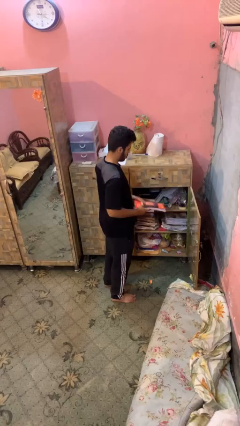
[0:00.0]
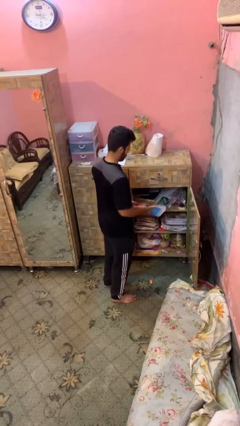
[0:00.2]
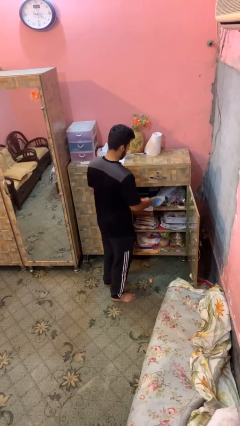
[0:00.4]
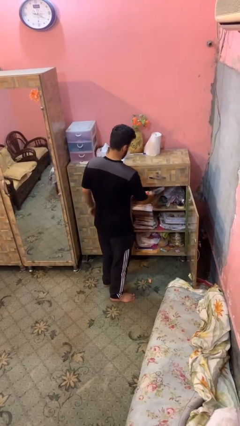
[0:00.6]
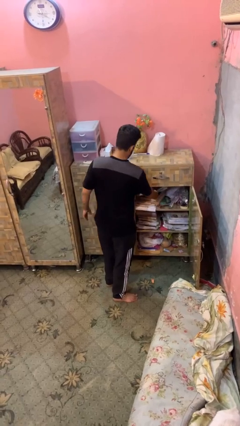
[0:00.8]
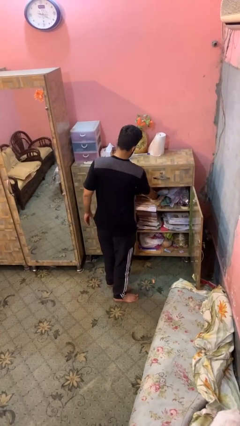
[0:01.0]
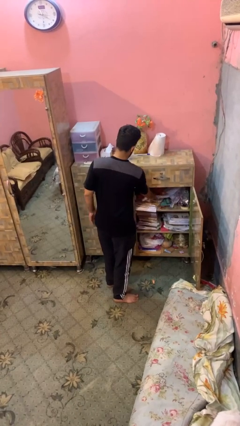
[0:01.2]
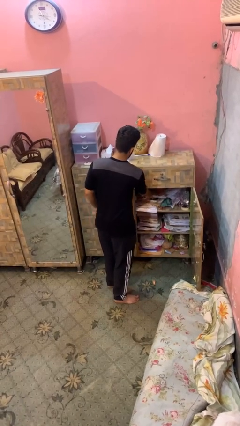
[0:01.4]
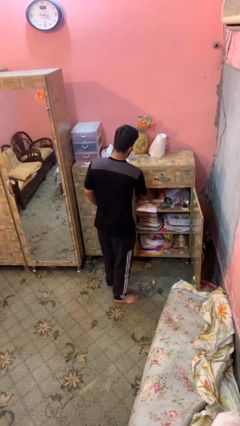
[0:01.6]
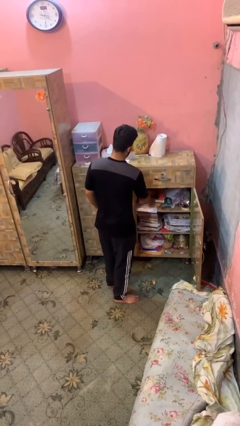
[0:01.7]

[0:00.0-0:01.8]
person puts down object into cabinet

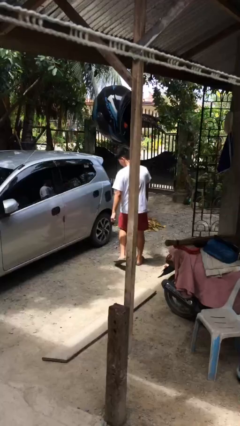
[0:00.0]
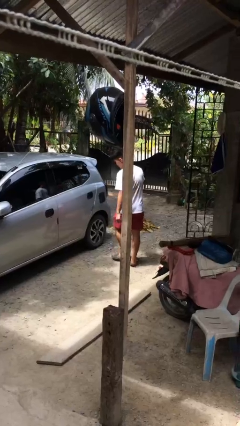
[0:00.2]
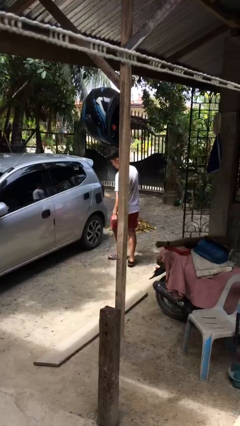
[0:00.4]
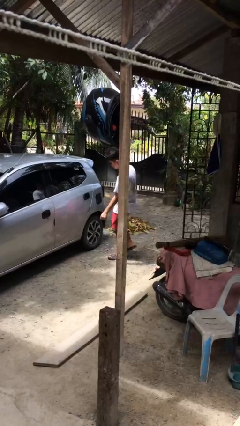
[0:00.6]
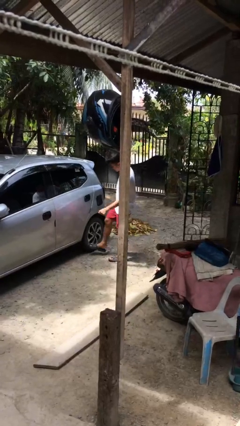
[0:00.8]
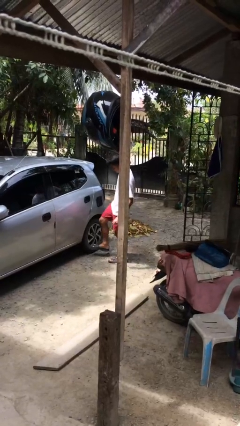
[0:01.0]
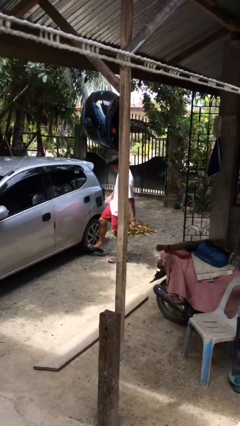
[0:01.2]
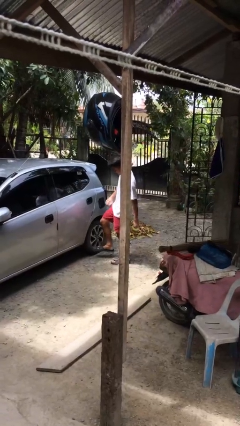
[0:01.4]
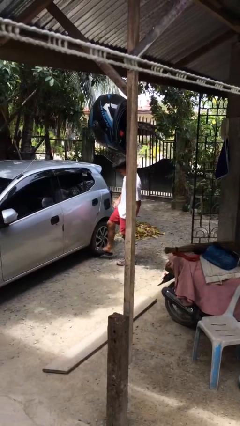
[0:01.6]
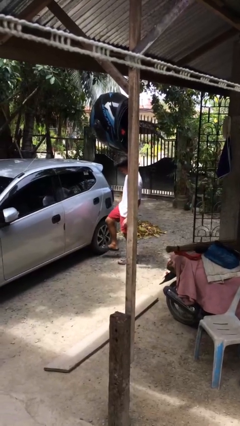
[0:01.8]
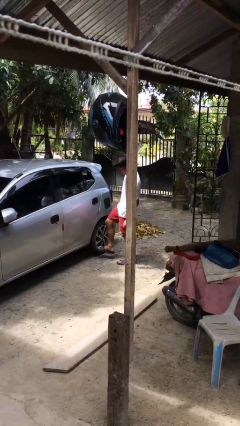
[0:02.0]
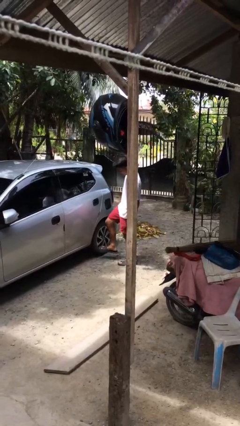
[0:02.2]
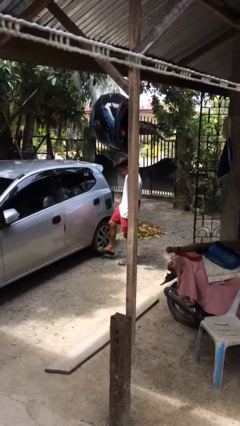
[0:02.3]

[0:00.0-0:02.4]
person kicks car tires

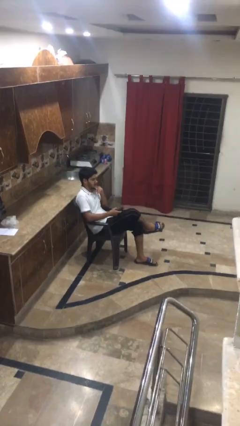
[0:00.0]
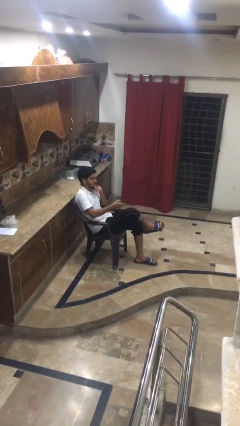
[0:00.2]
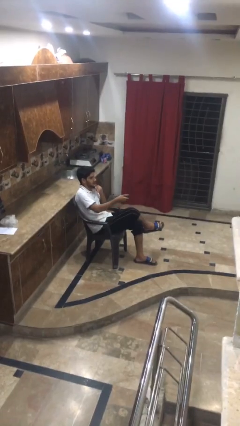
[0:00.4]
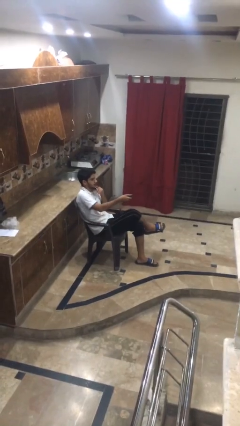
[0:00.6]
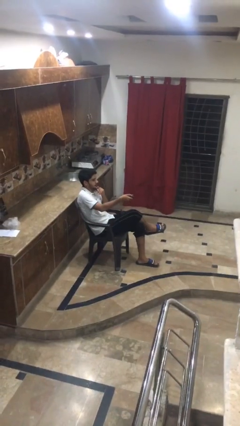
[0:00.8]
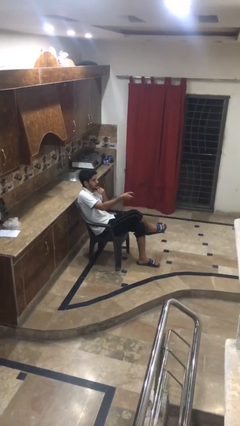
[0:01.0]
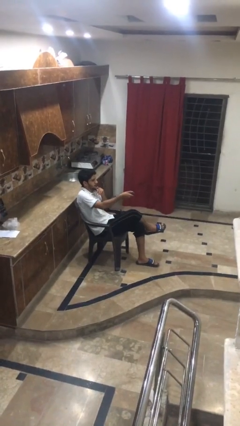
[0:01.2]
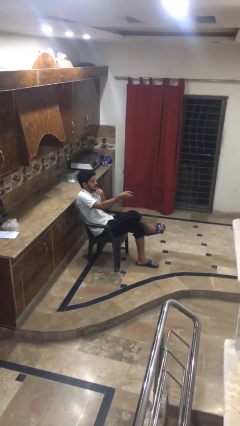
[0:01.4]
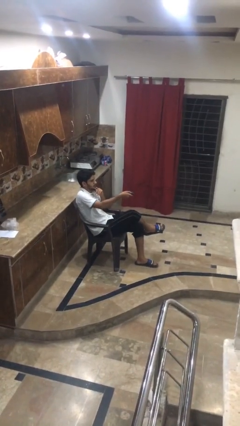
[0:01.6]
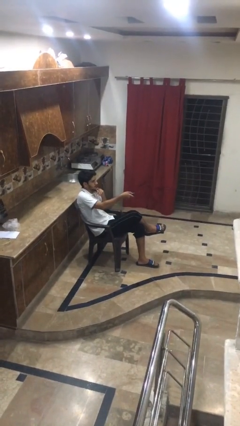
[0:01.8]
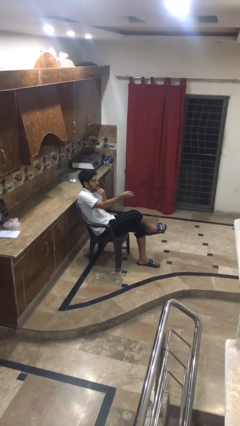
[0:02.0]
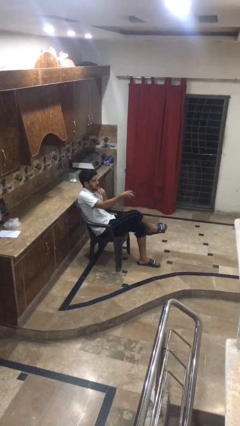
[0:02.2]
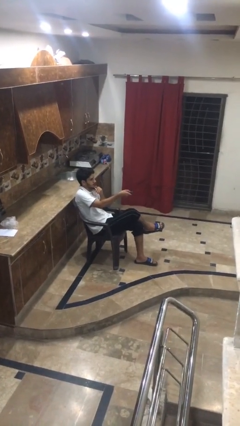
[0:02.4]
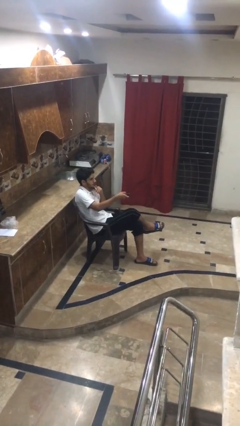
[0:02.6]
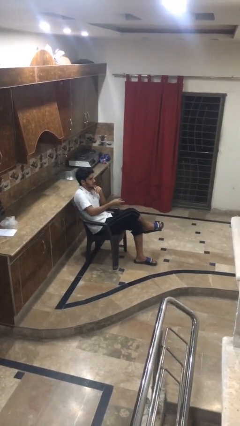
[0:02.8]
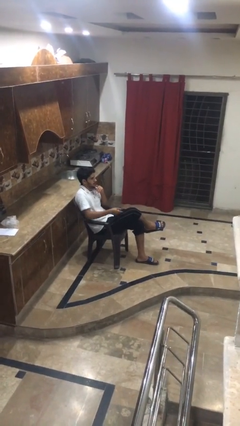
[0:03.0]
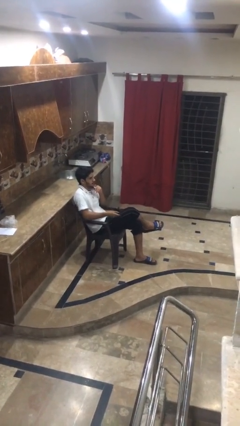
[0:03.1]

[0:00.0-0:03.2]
person uses television remote

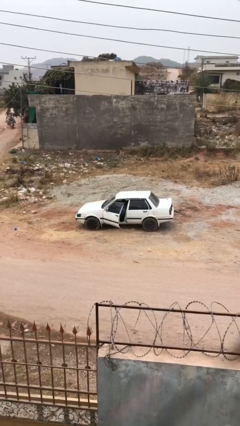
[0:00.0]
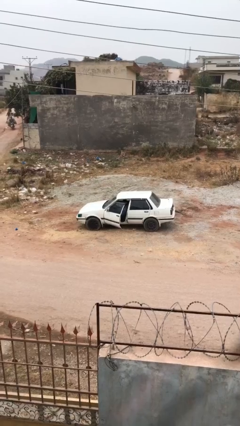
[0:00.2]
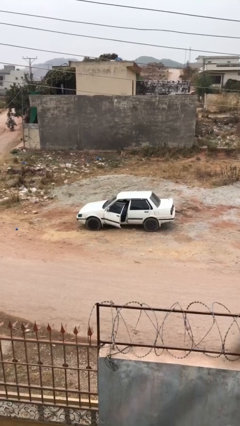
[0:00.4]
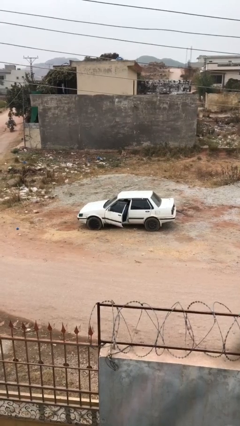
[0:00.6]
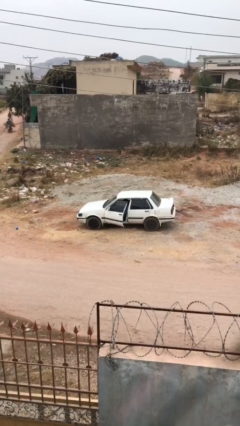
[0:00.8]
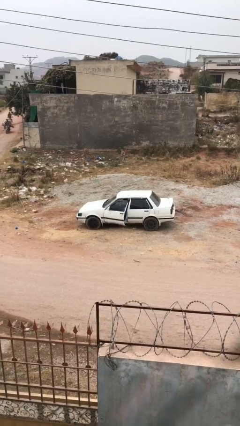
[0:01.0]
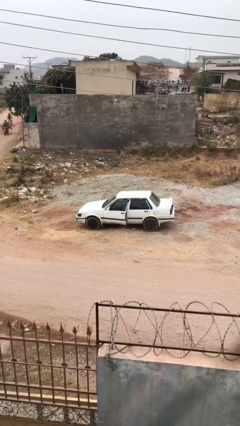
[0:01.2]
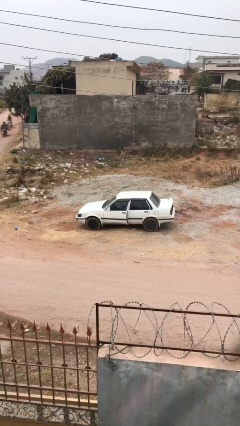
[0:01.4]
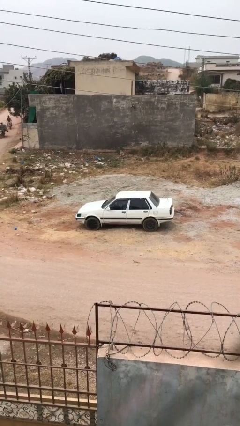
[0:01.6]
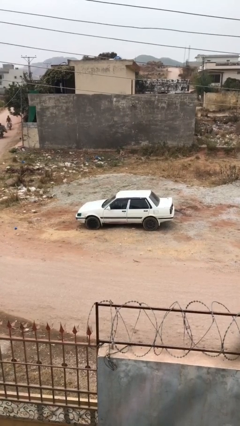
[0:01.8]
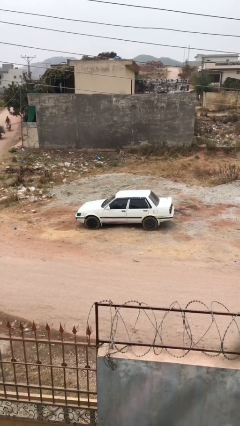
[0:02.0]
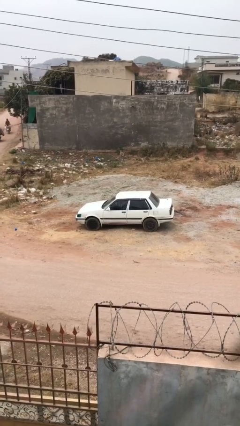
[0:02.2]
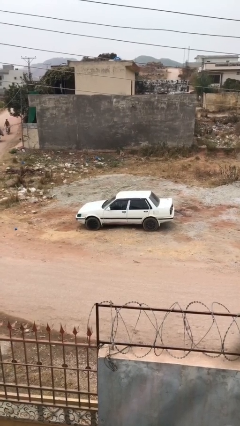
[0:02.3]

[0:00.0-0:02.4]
person closes car door

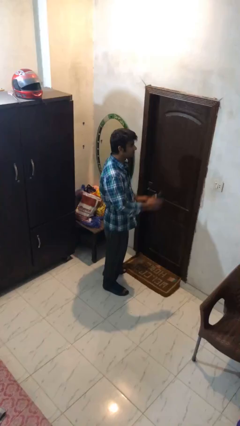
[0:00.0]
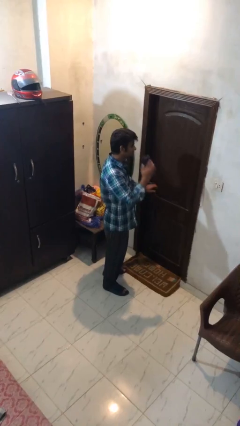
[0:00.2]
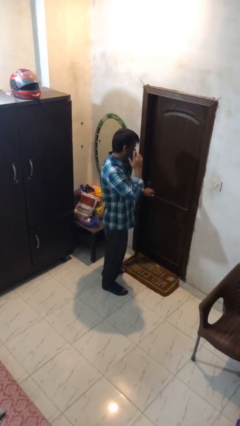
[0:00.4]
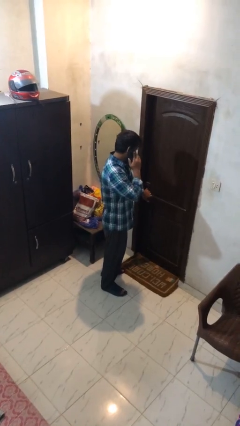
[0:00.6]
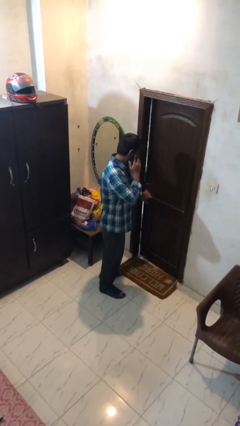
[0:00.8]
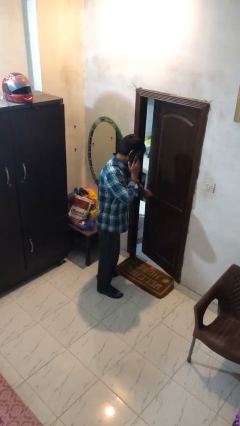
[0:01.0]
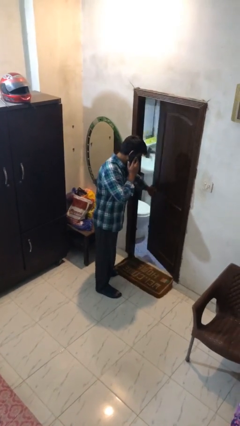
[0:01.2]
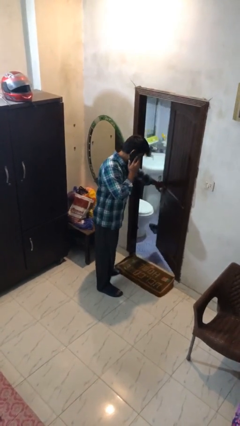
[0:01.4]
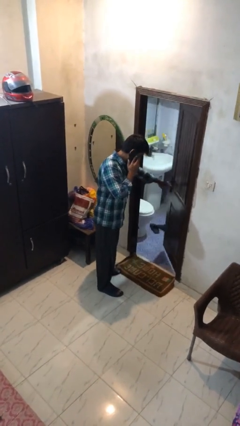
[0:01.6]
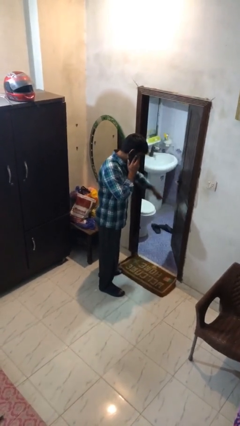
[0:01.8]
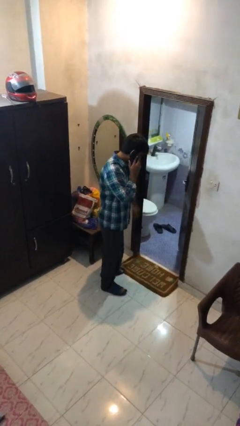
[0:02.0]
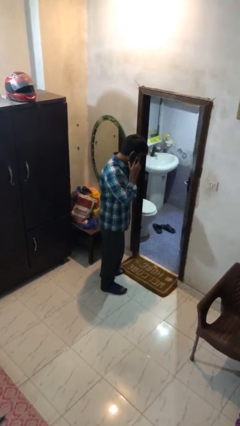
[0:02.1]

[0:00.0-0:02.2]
person opens facility door

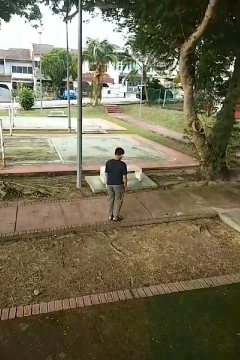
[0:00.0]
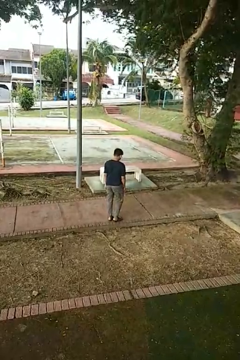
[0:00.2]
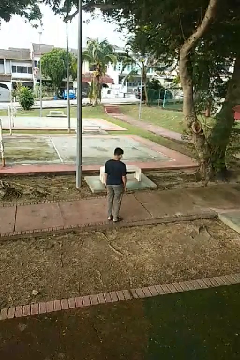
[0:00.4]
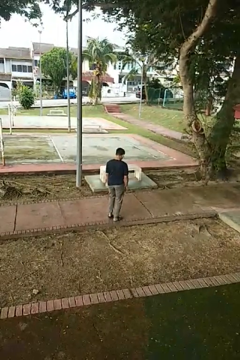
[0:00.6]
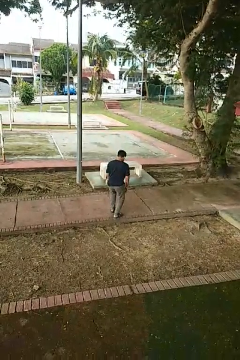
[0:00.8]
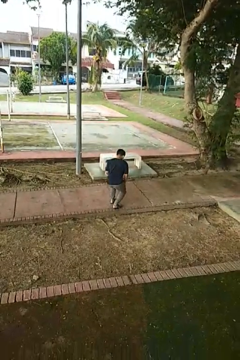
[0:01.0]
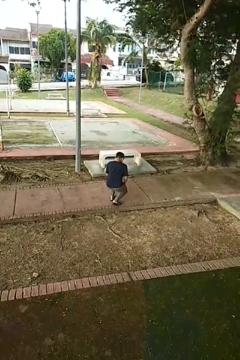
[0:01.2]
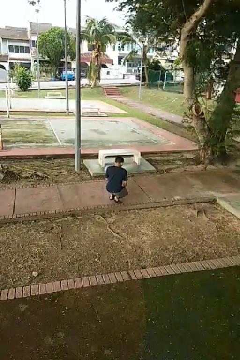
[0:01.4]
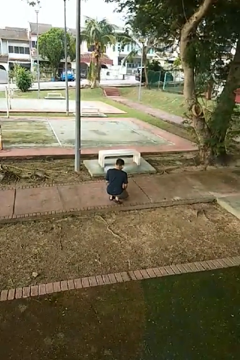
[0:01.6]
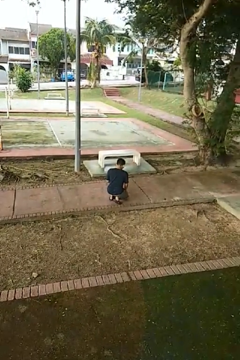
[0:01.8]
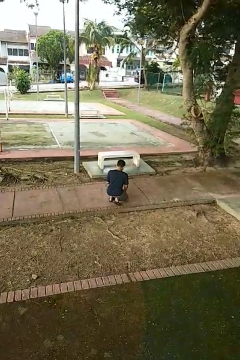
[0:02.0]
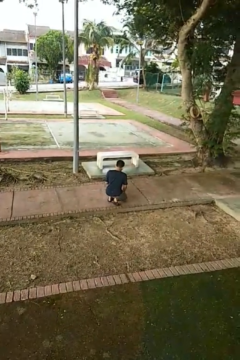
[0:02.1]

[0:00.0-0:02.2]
person kneels

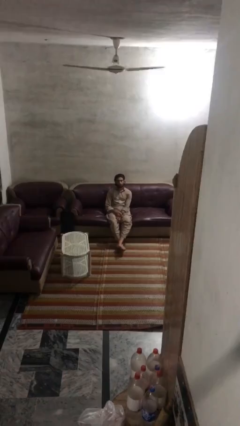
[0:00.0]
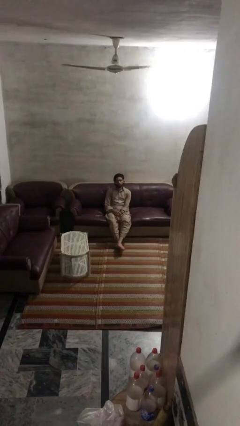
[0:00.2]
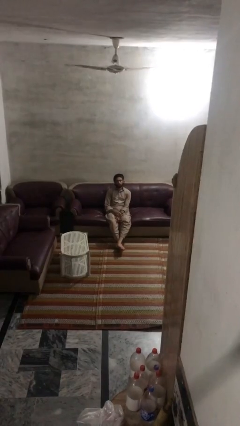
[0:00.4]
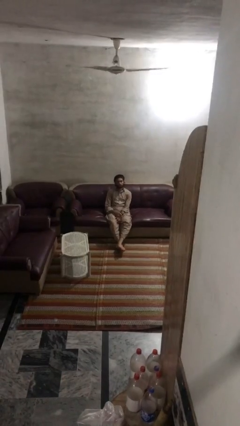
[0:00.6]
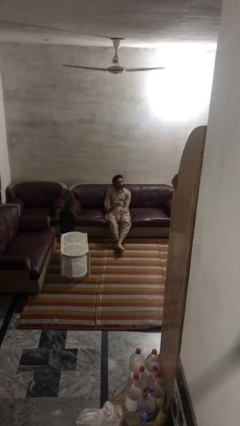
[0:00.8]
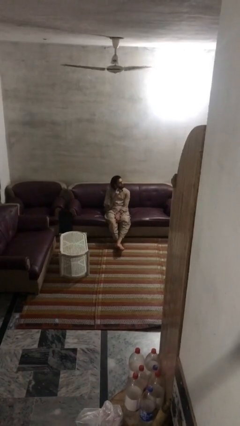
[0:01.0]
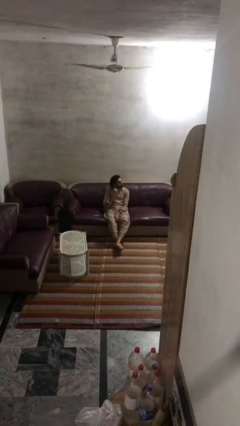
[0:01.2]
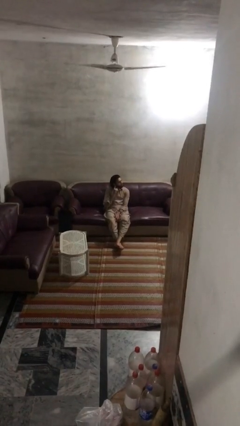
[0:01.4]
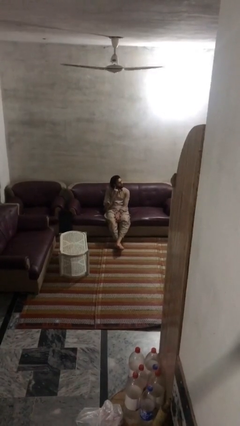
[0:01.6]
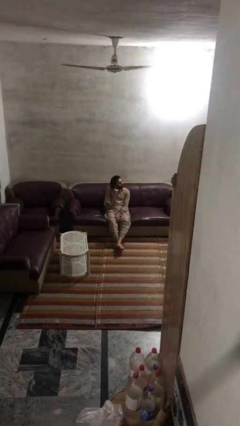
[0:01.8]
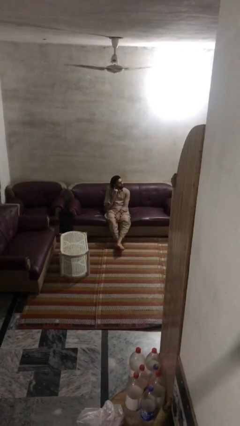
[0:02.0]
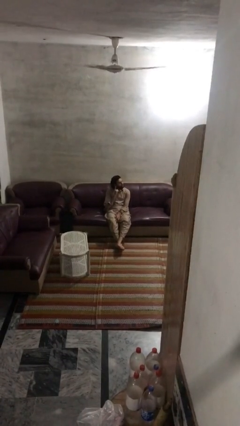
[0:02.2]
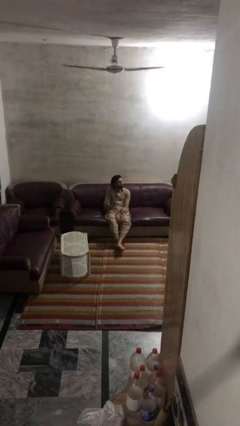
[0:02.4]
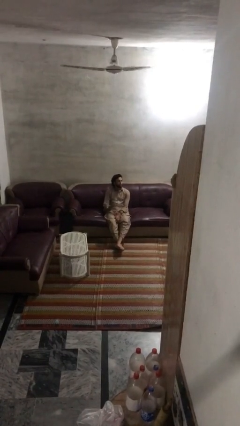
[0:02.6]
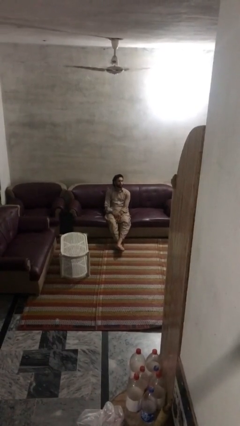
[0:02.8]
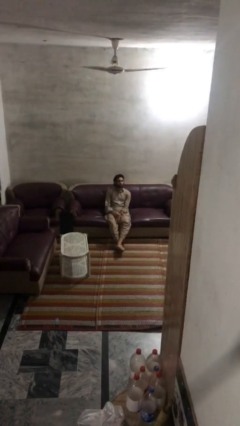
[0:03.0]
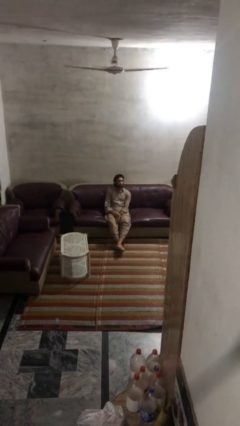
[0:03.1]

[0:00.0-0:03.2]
person gestures listen closely
